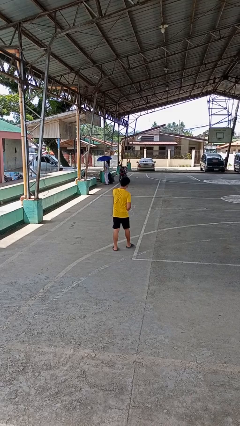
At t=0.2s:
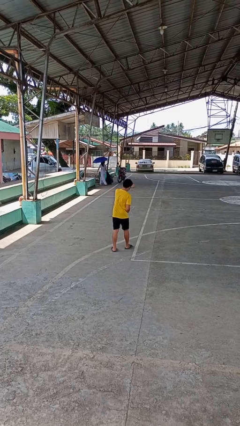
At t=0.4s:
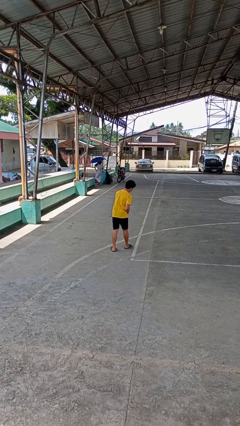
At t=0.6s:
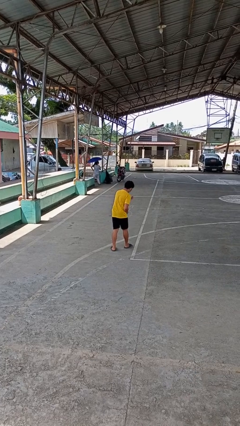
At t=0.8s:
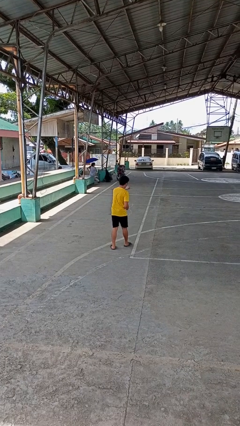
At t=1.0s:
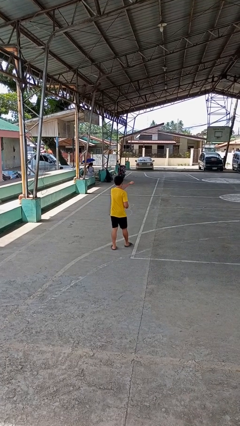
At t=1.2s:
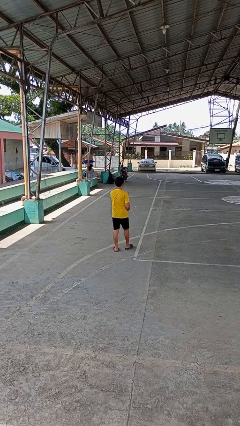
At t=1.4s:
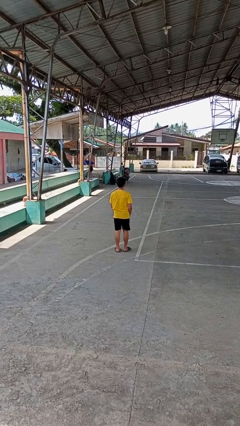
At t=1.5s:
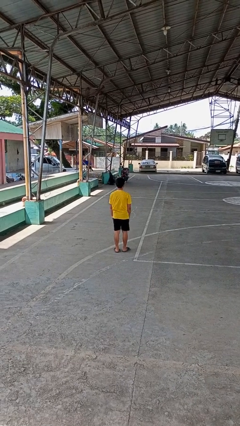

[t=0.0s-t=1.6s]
person punches

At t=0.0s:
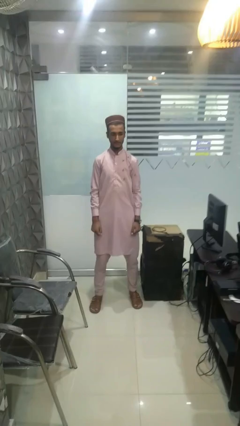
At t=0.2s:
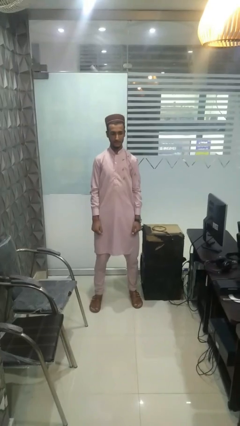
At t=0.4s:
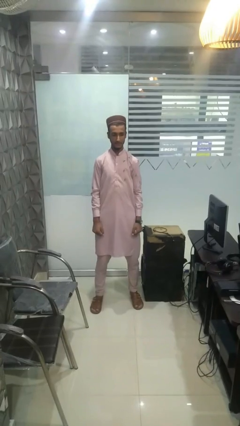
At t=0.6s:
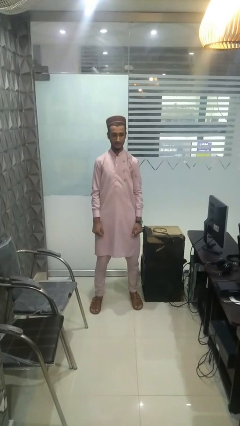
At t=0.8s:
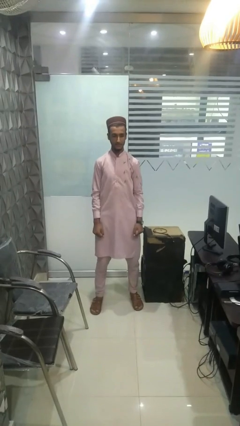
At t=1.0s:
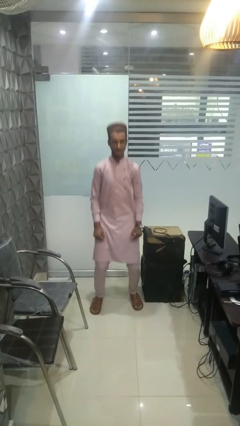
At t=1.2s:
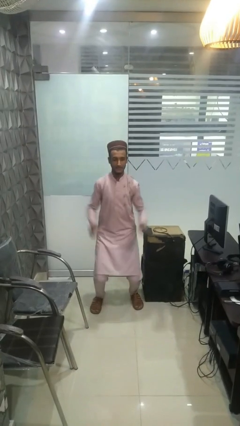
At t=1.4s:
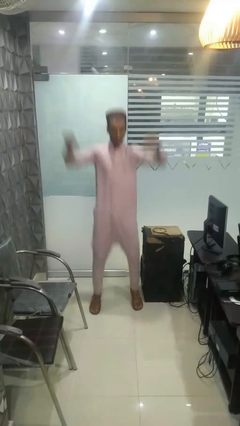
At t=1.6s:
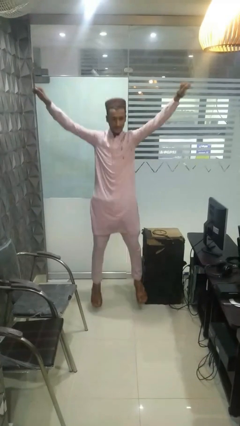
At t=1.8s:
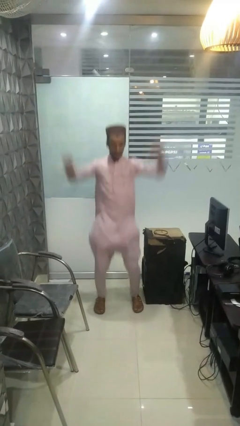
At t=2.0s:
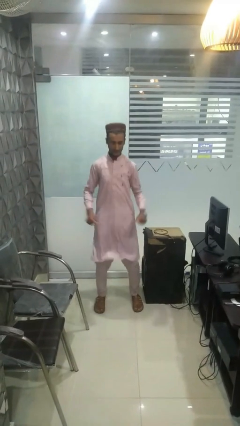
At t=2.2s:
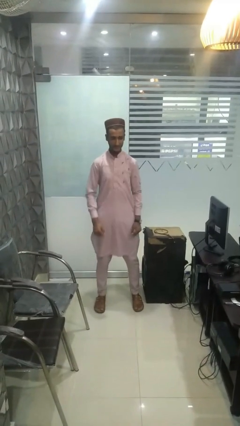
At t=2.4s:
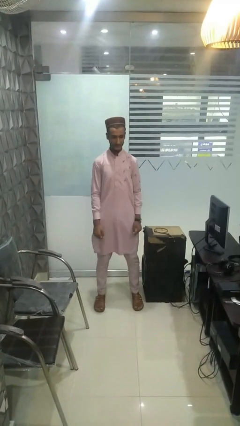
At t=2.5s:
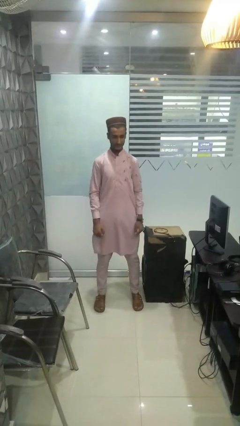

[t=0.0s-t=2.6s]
person exercises with jumping jacks

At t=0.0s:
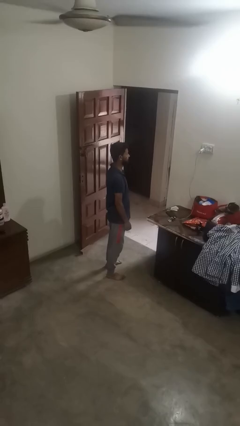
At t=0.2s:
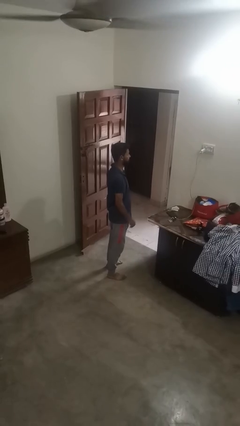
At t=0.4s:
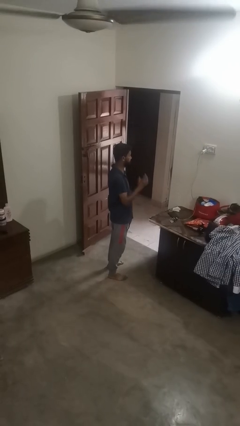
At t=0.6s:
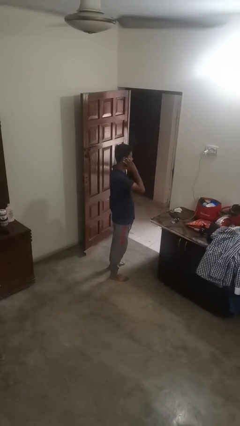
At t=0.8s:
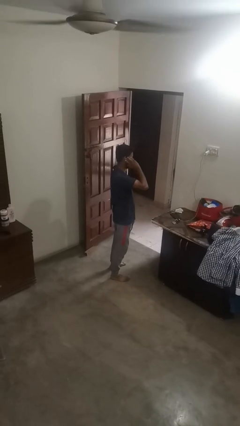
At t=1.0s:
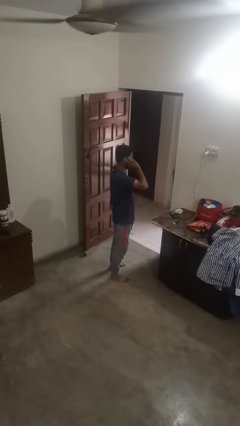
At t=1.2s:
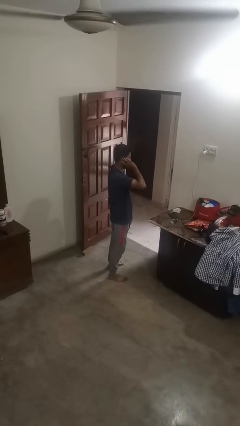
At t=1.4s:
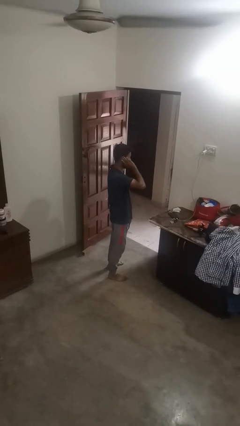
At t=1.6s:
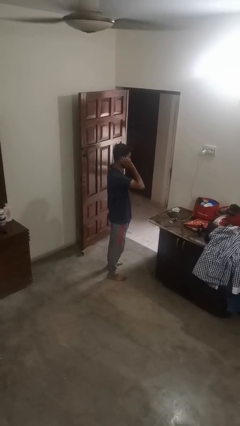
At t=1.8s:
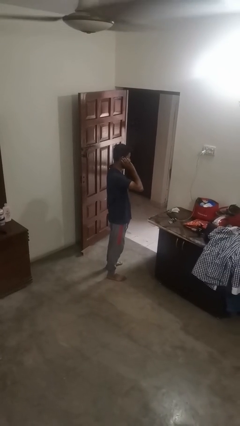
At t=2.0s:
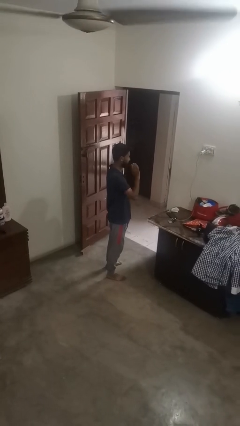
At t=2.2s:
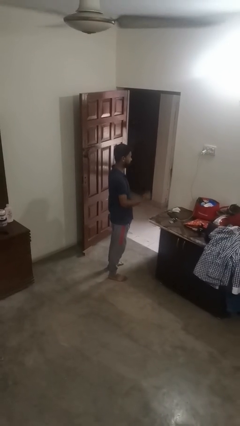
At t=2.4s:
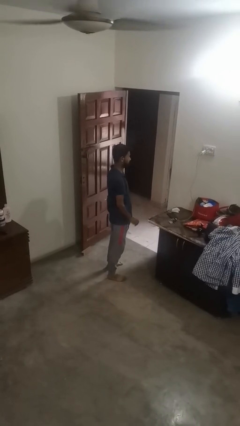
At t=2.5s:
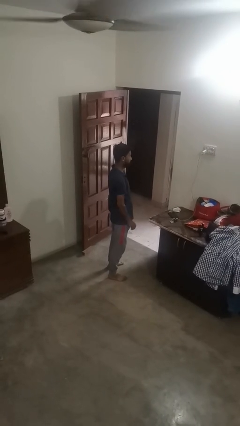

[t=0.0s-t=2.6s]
person touches earlobe

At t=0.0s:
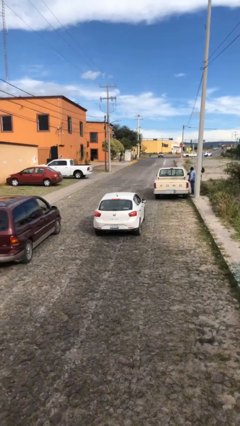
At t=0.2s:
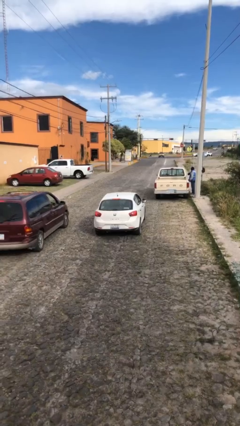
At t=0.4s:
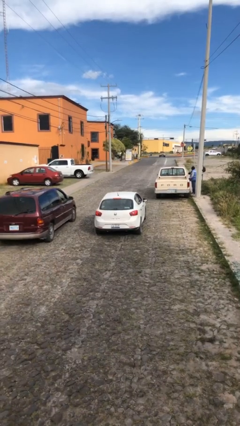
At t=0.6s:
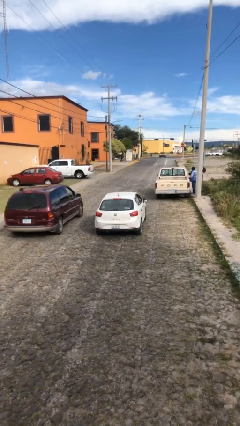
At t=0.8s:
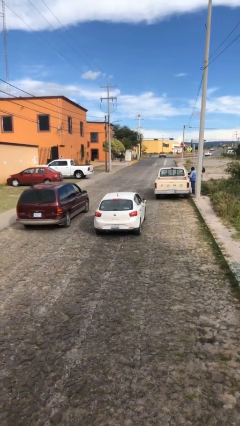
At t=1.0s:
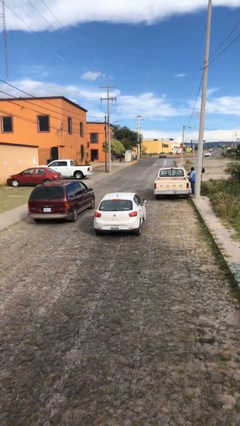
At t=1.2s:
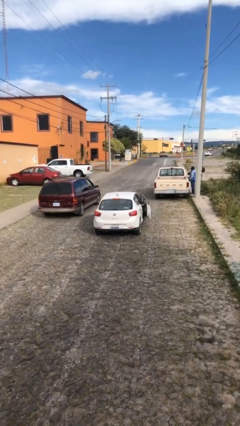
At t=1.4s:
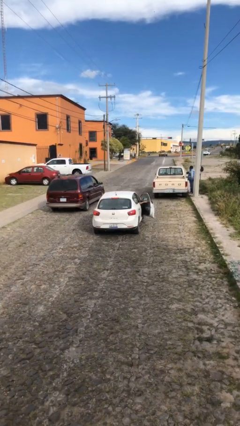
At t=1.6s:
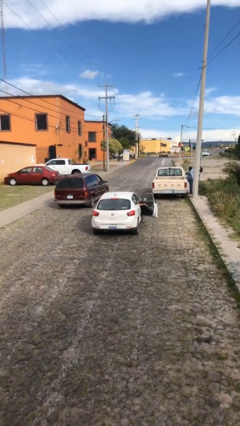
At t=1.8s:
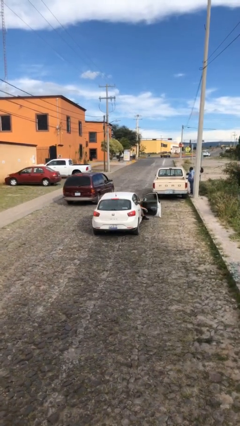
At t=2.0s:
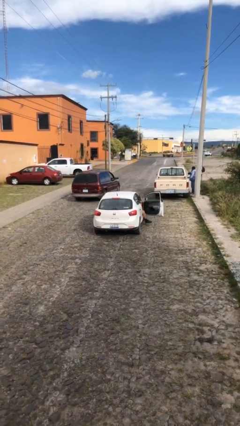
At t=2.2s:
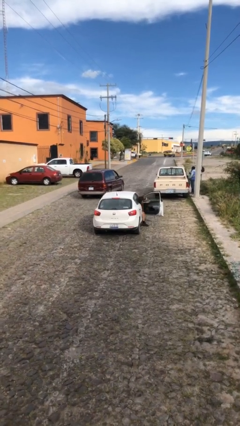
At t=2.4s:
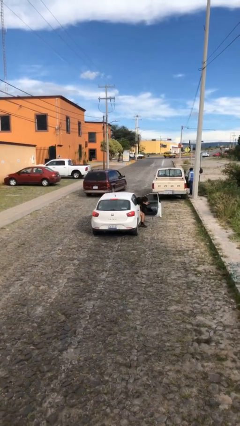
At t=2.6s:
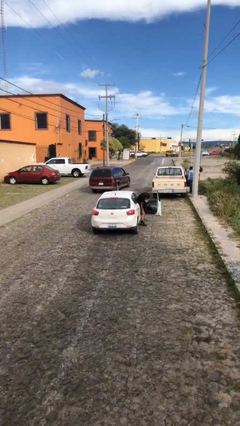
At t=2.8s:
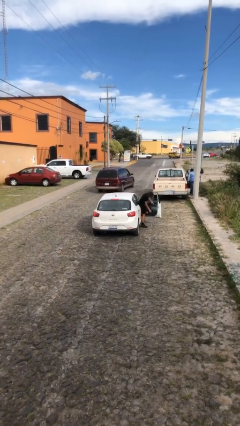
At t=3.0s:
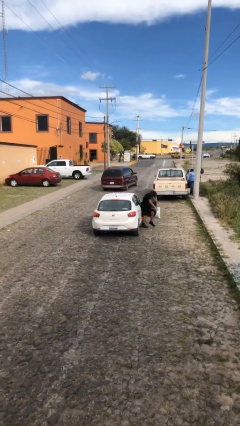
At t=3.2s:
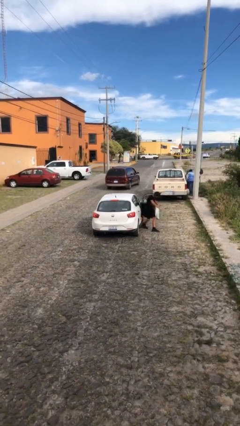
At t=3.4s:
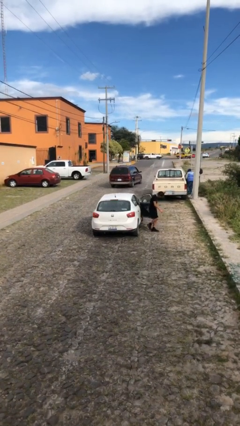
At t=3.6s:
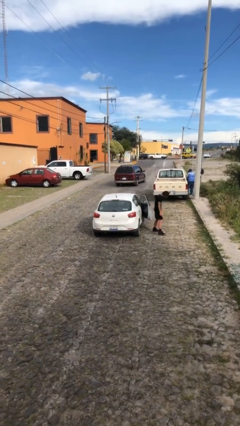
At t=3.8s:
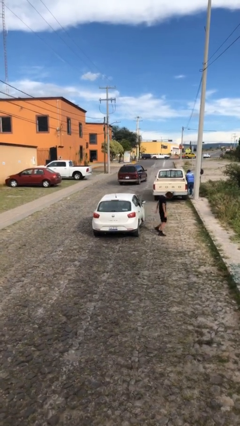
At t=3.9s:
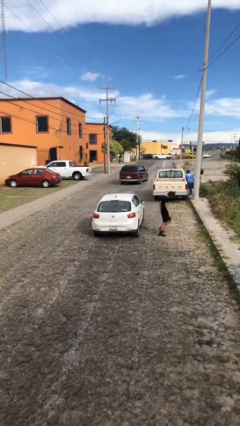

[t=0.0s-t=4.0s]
car drops off person

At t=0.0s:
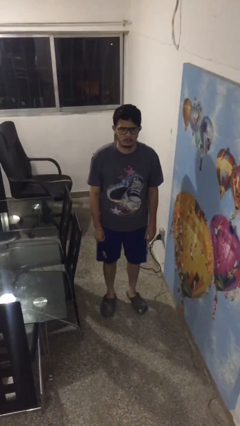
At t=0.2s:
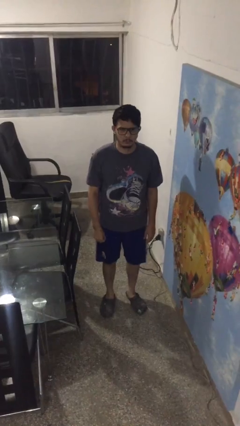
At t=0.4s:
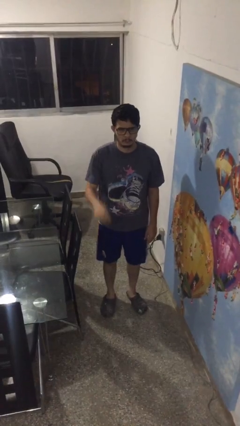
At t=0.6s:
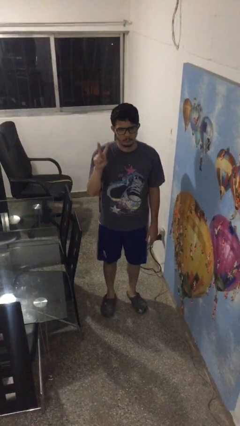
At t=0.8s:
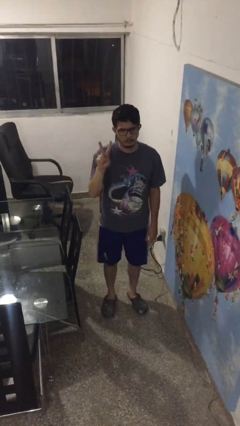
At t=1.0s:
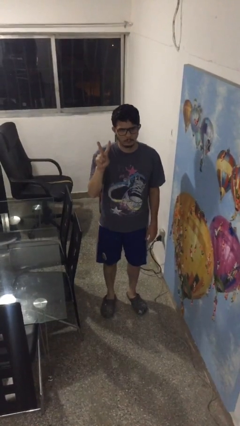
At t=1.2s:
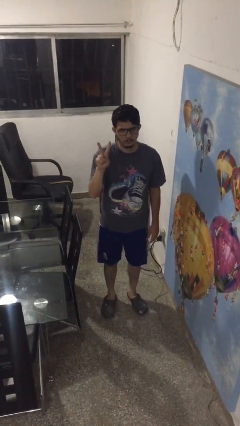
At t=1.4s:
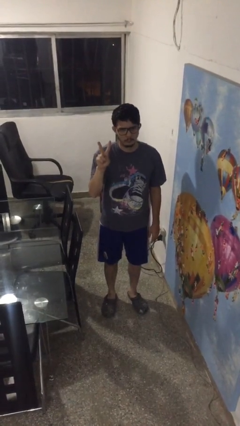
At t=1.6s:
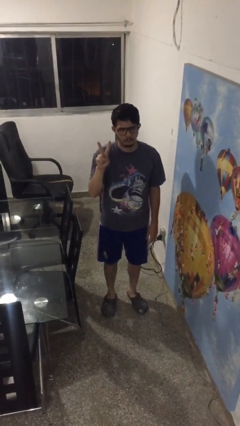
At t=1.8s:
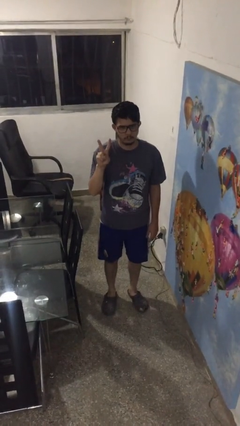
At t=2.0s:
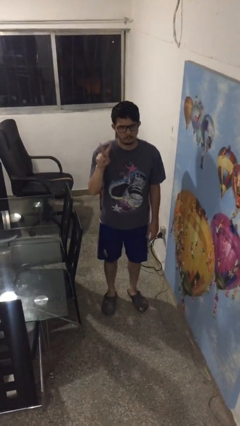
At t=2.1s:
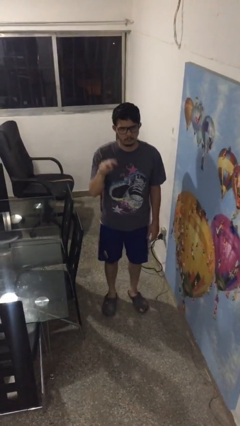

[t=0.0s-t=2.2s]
person gestures peace

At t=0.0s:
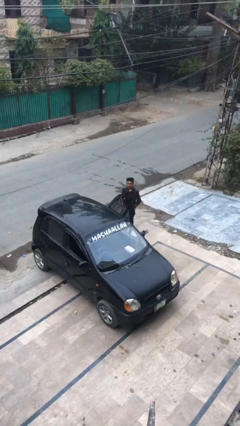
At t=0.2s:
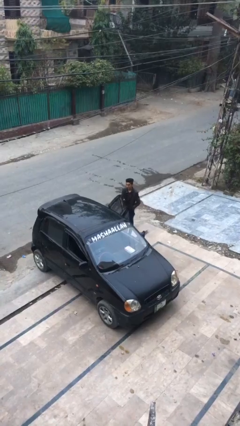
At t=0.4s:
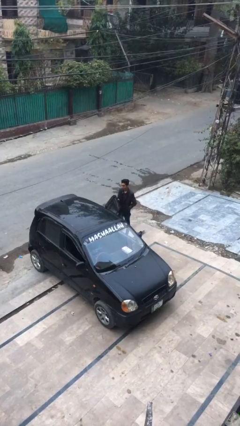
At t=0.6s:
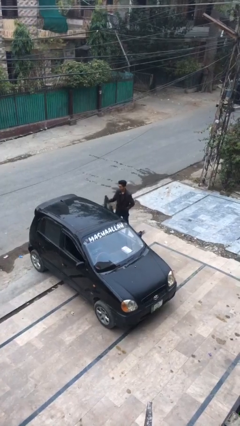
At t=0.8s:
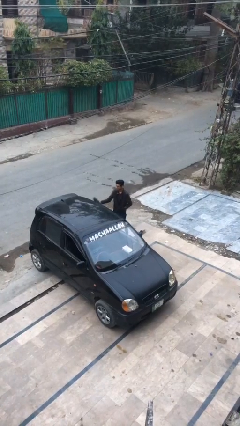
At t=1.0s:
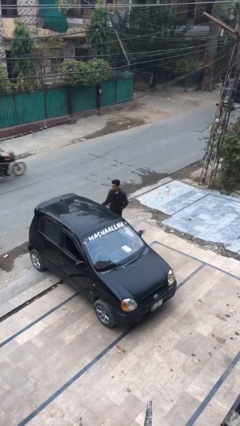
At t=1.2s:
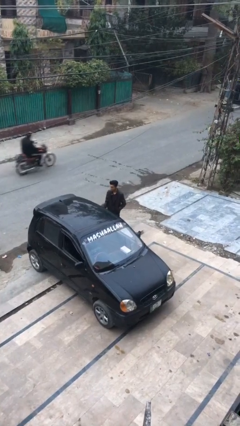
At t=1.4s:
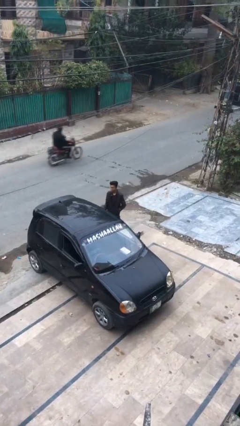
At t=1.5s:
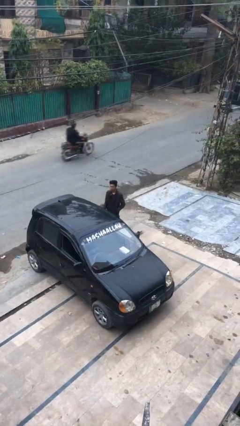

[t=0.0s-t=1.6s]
person closes car door

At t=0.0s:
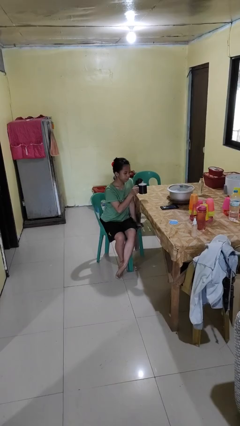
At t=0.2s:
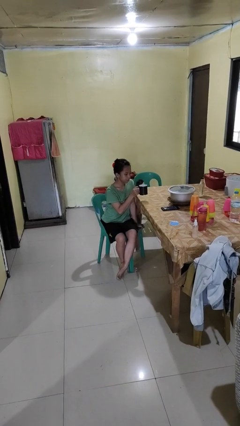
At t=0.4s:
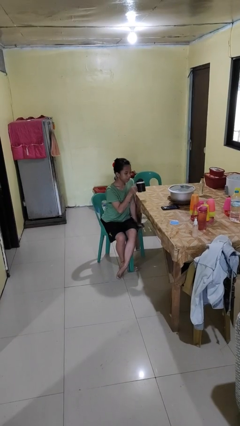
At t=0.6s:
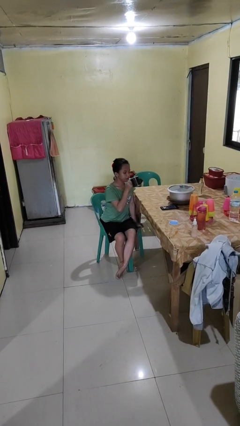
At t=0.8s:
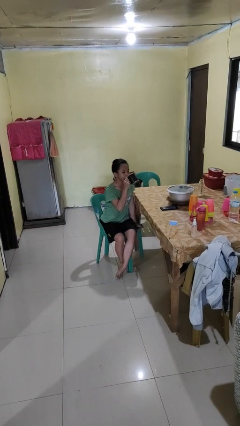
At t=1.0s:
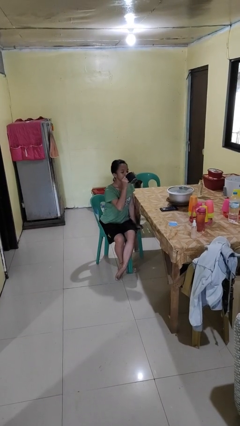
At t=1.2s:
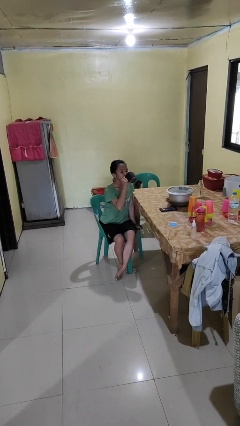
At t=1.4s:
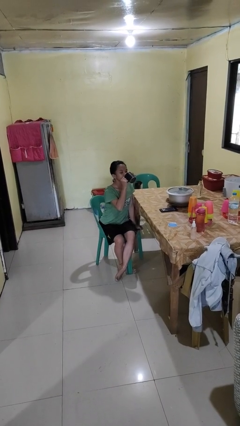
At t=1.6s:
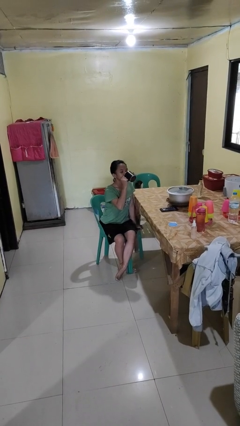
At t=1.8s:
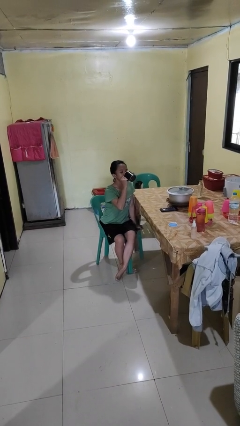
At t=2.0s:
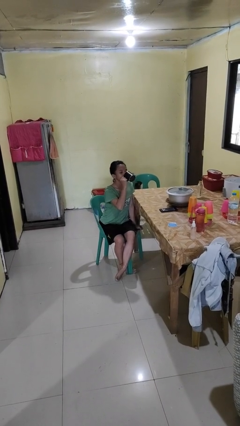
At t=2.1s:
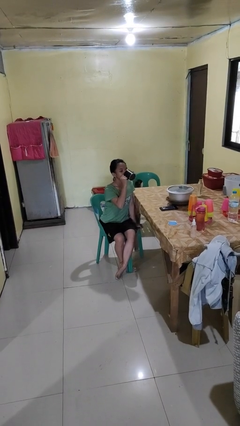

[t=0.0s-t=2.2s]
person drinks from mug

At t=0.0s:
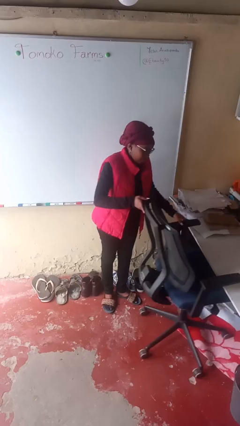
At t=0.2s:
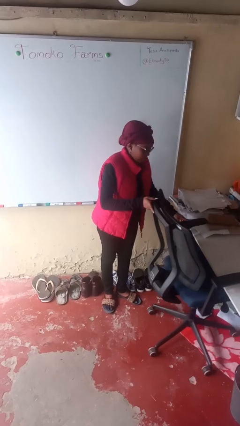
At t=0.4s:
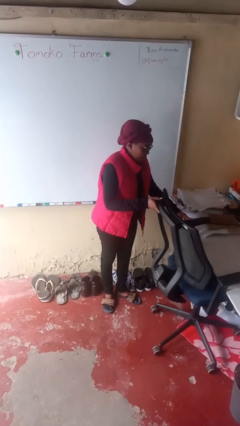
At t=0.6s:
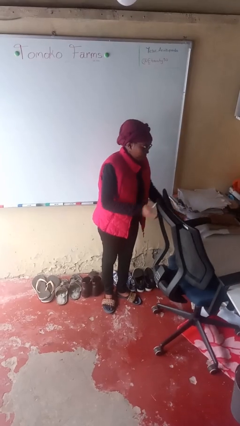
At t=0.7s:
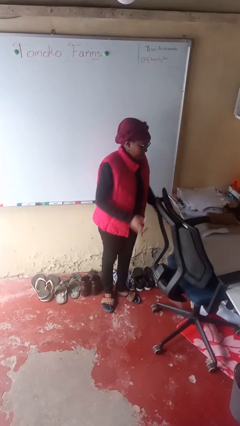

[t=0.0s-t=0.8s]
person pushes in chair
